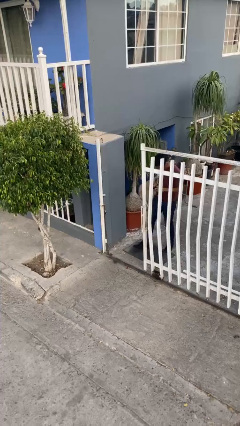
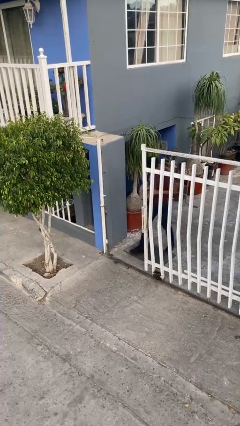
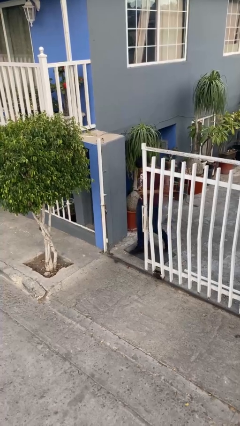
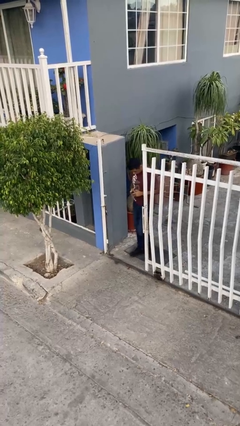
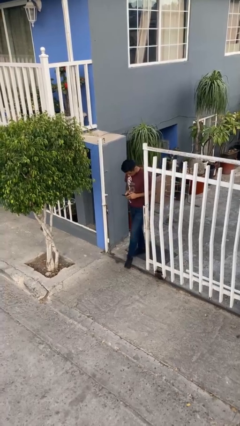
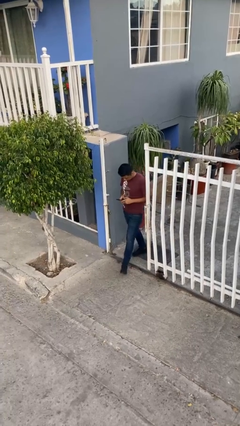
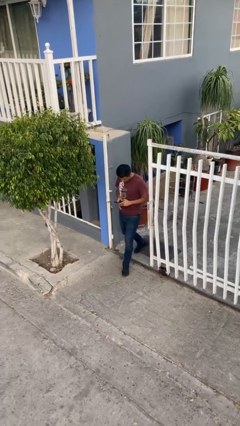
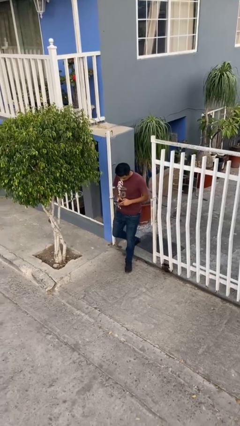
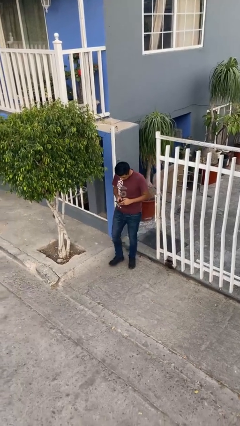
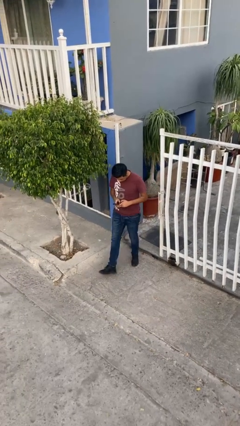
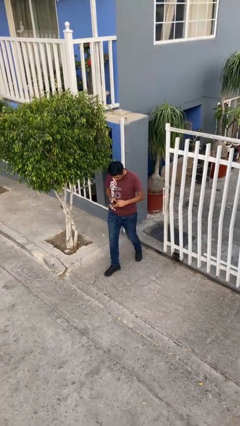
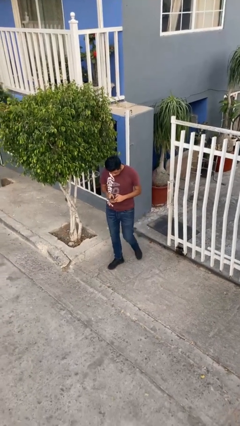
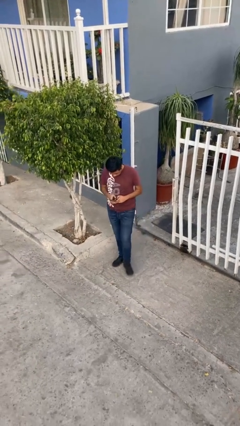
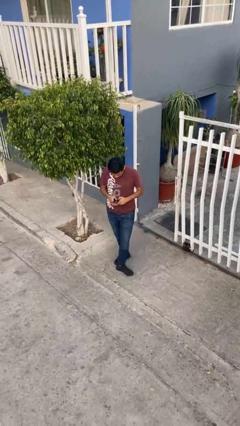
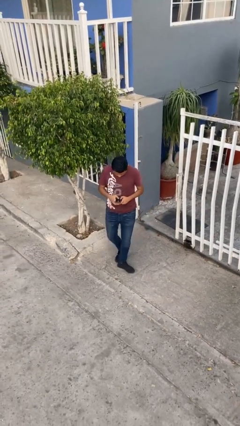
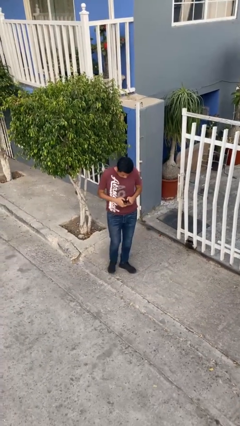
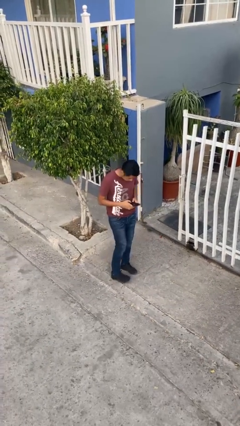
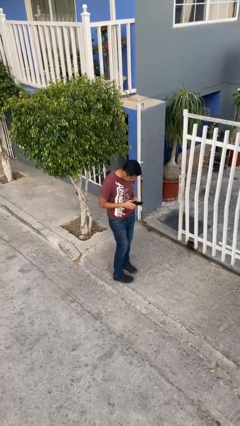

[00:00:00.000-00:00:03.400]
person enters scene through structure

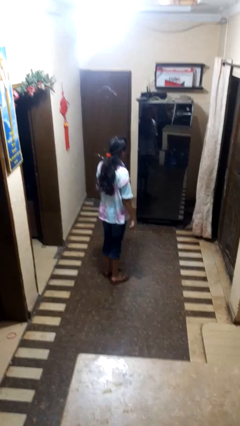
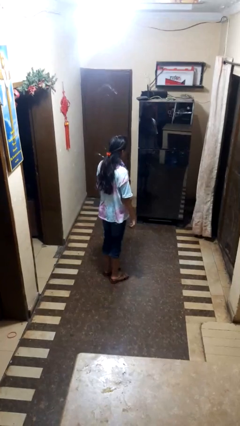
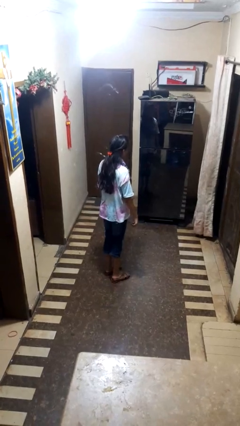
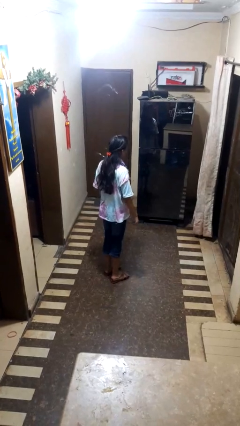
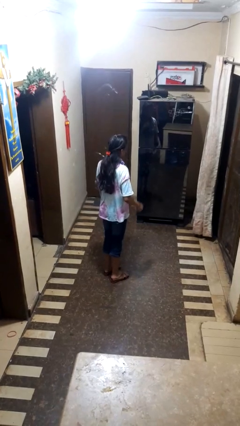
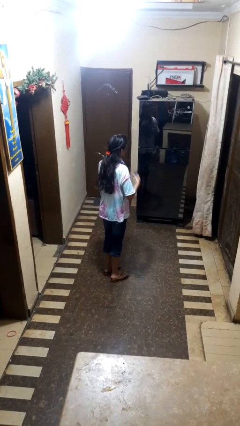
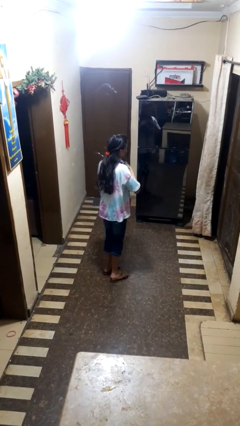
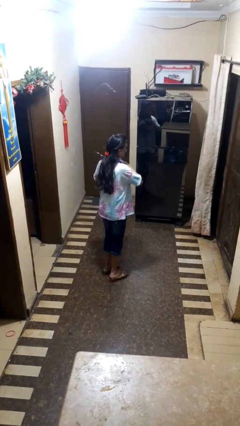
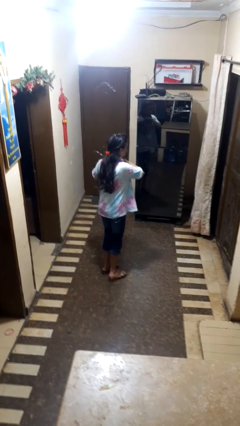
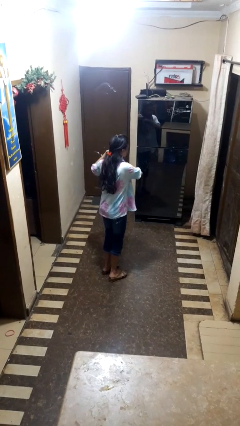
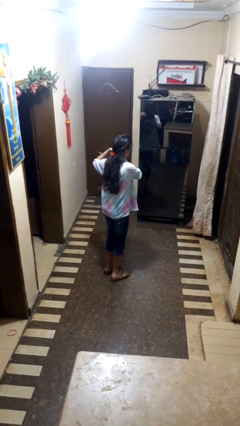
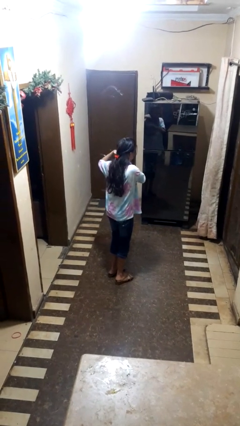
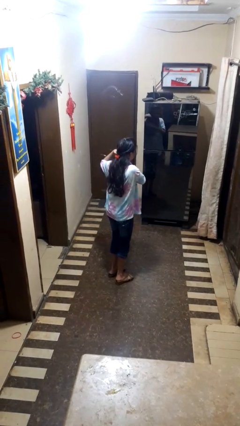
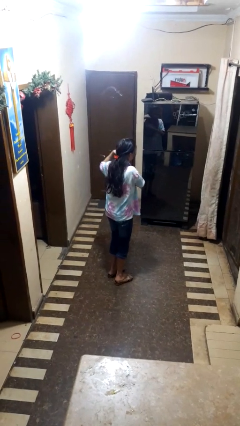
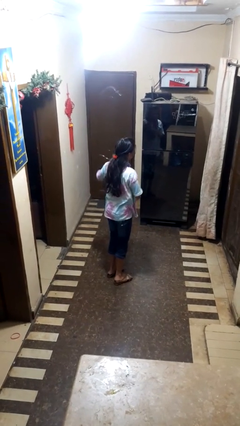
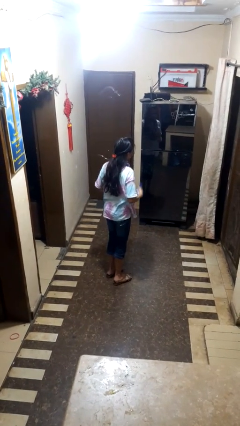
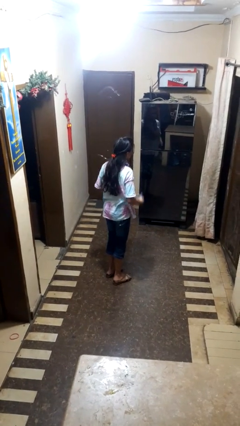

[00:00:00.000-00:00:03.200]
person applies deodorant

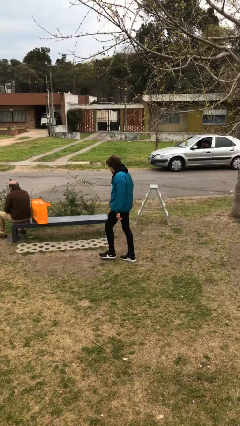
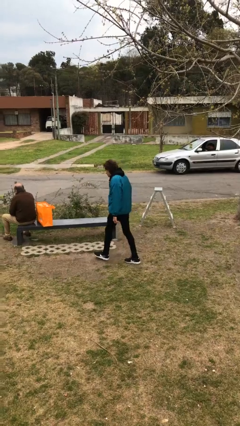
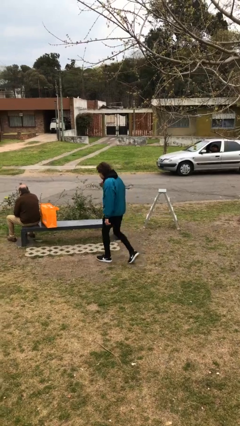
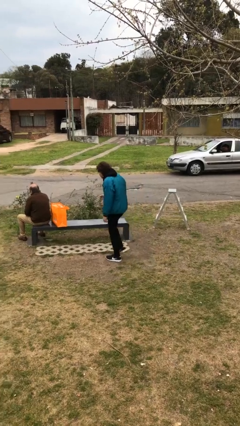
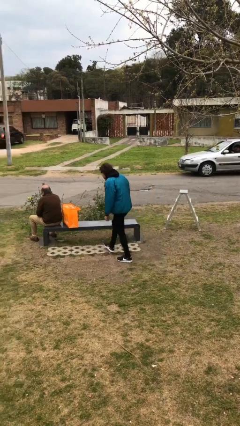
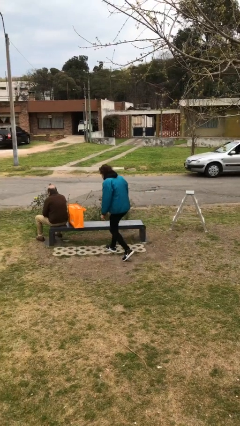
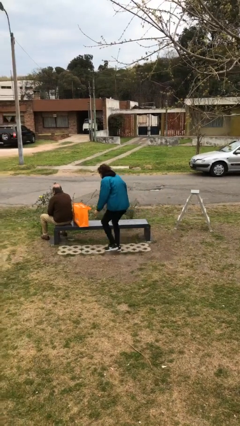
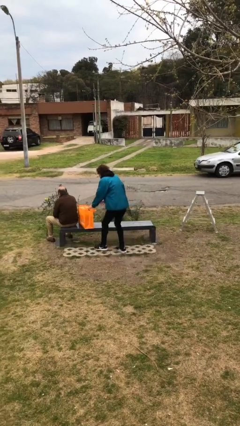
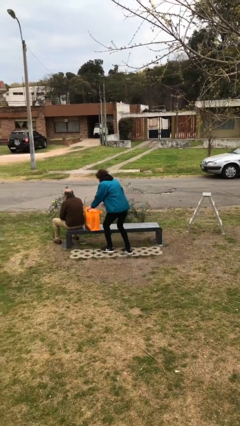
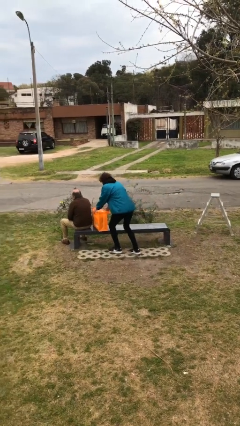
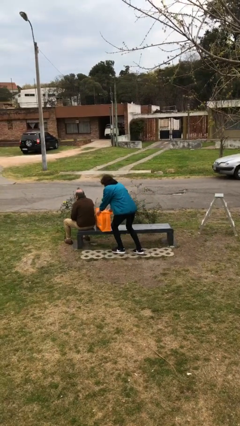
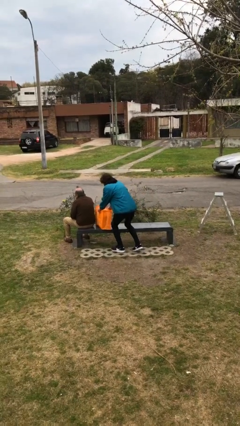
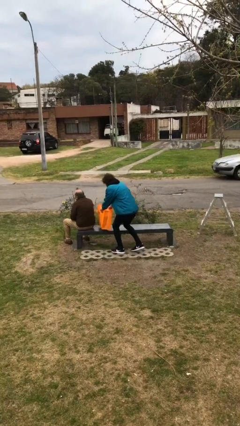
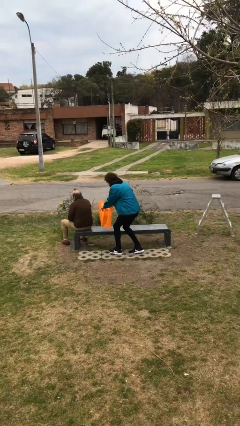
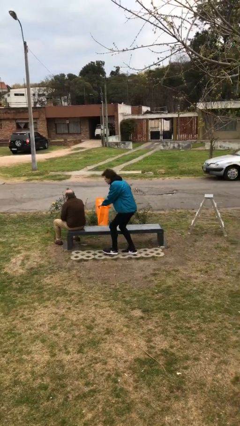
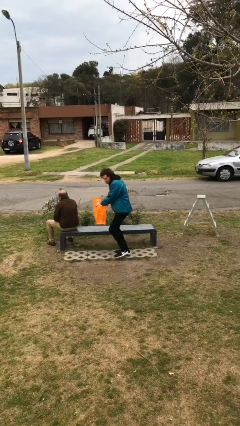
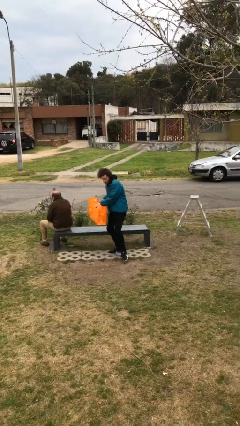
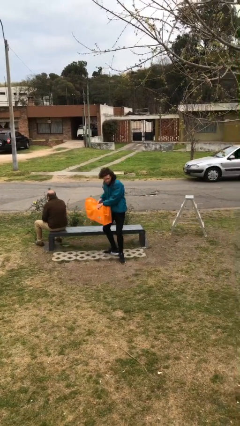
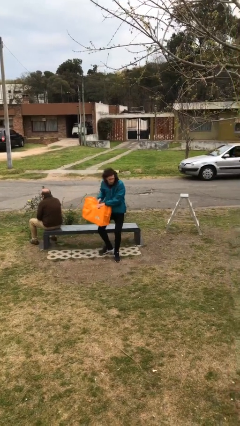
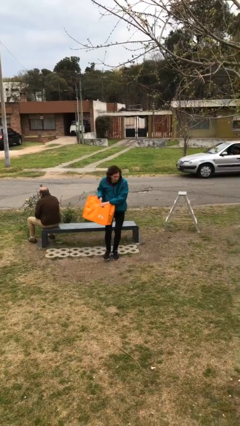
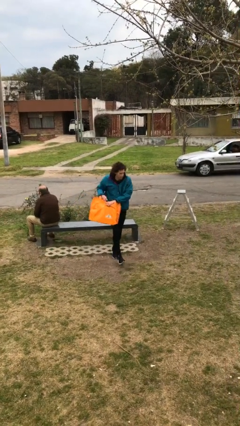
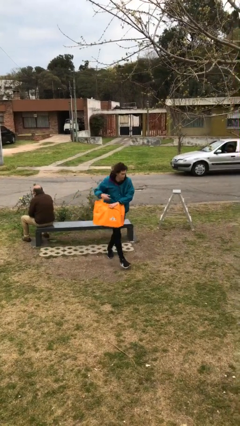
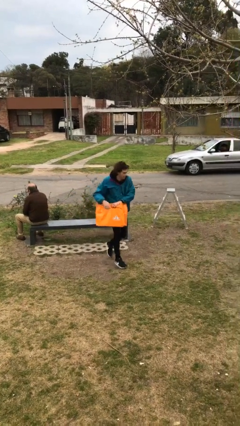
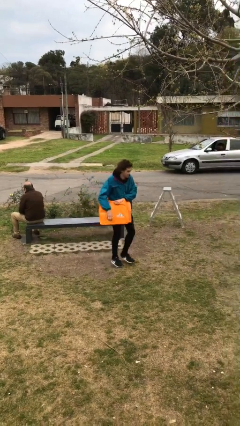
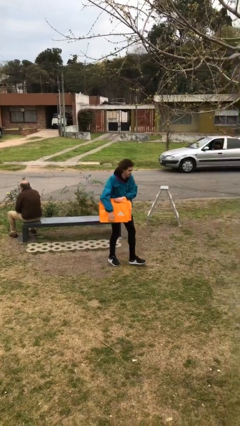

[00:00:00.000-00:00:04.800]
person steals object from person

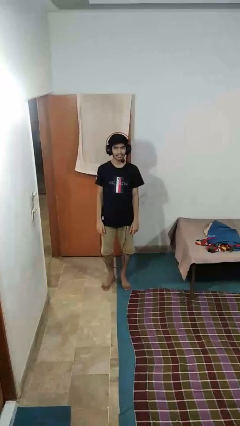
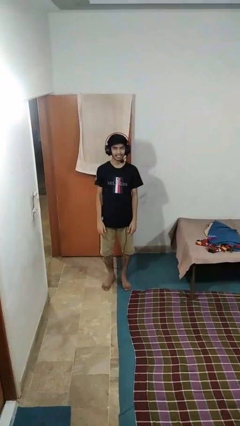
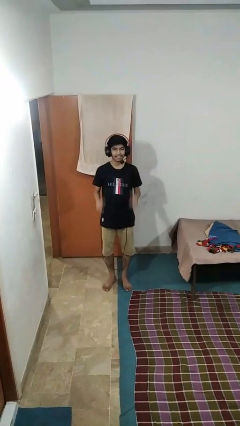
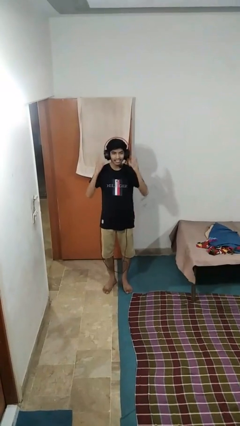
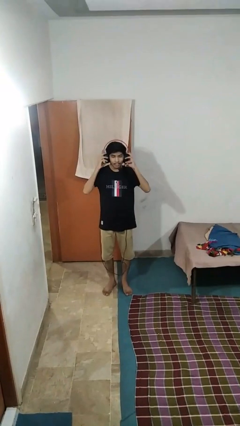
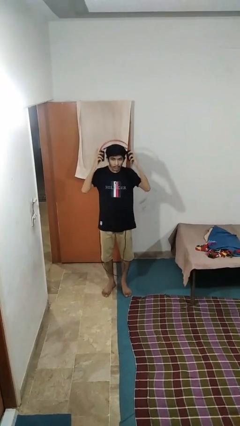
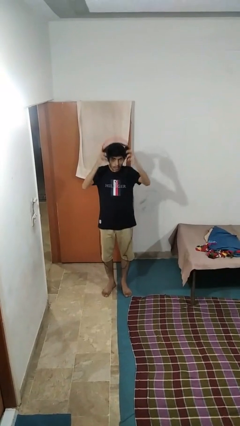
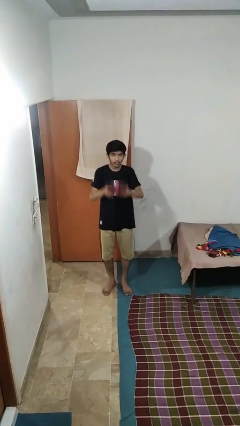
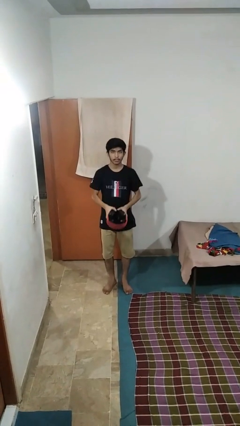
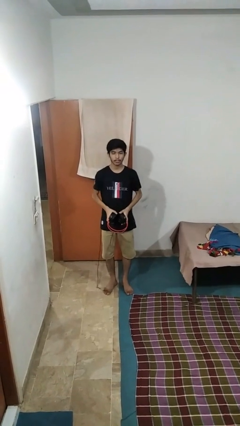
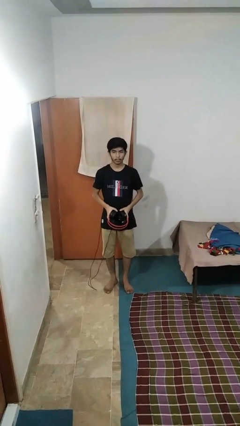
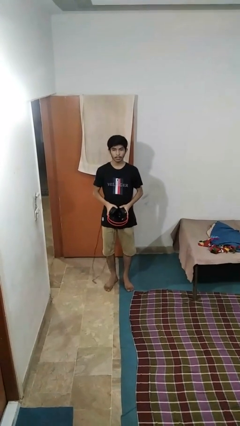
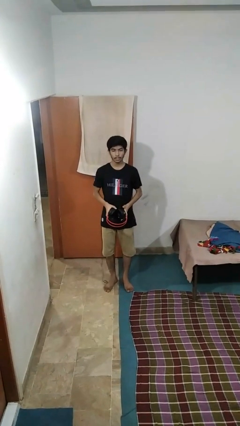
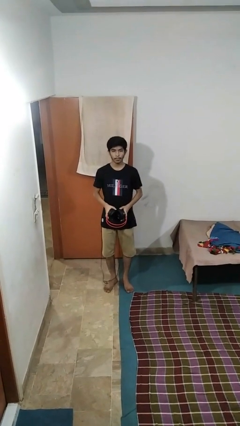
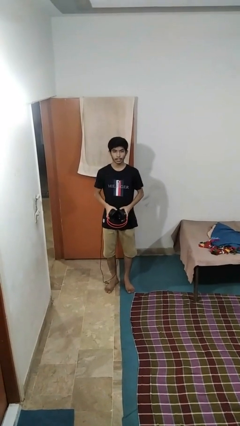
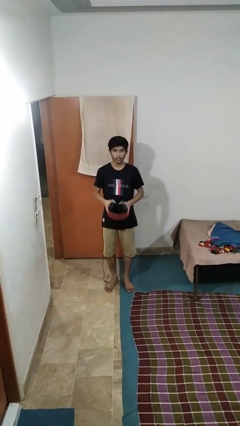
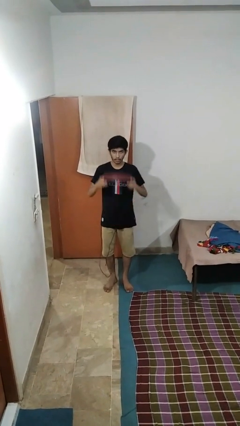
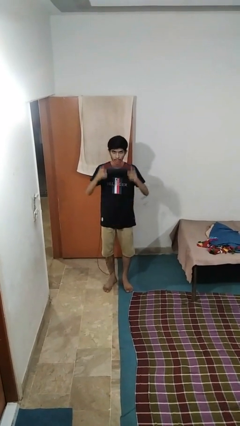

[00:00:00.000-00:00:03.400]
person takes off headphones

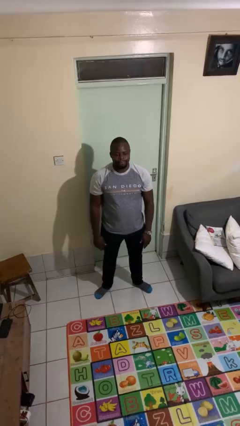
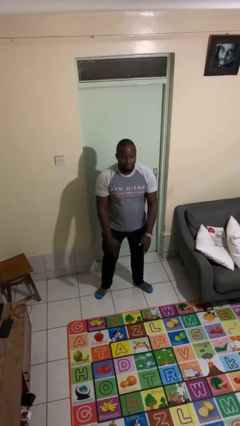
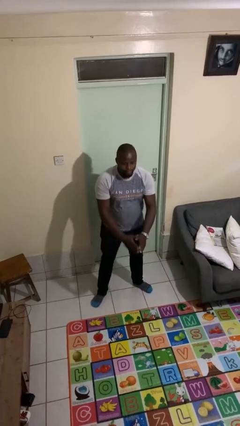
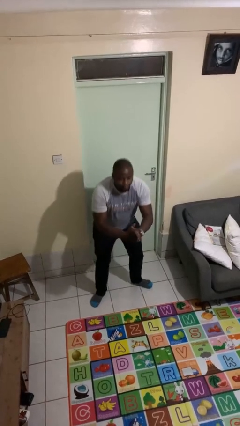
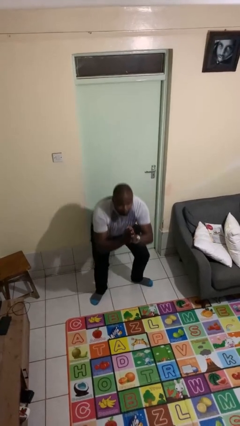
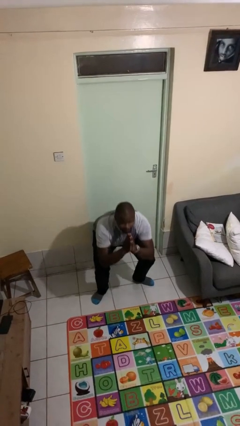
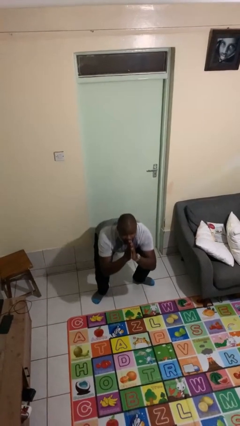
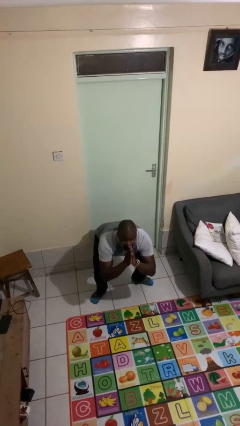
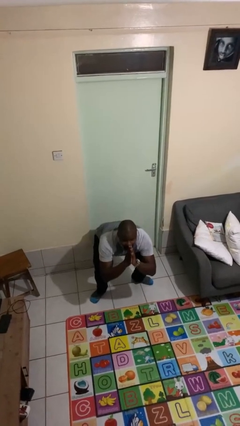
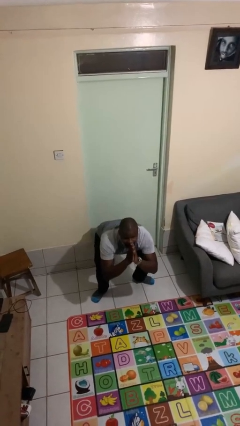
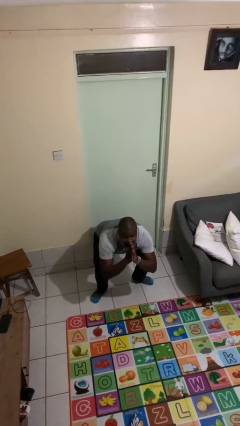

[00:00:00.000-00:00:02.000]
person squats

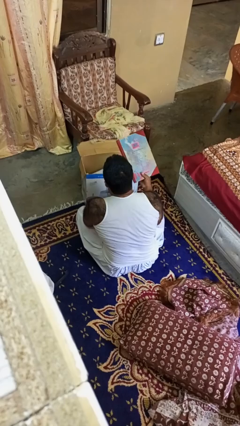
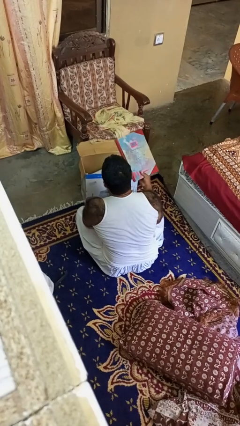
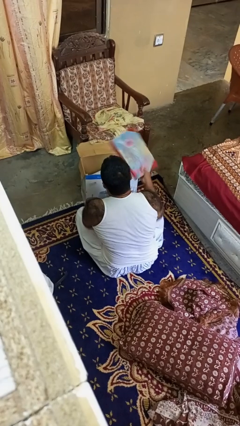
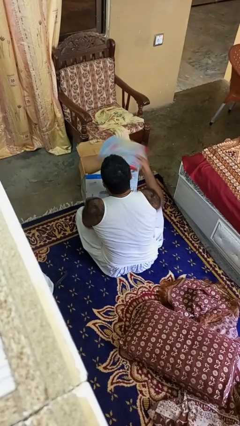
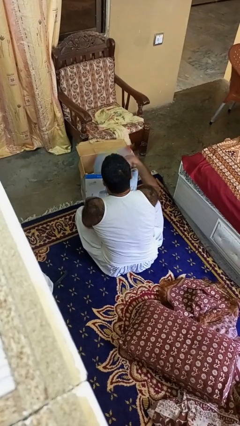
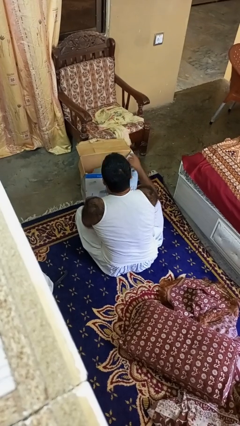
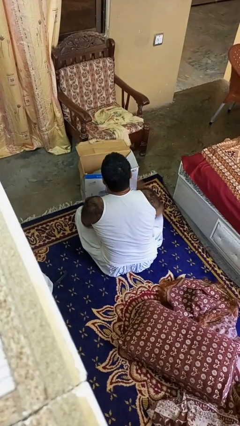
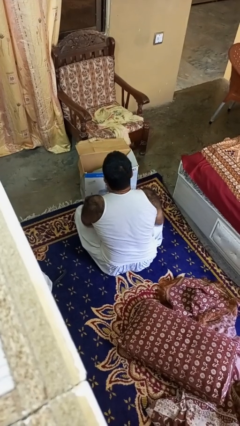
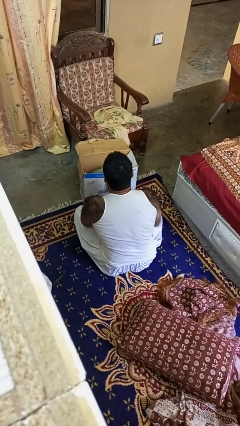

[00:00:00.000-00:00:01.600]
person puts object into box
